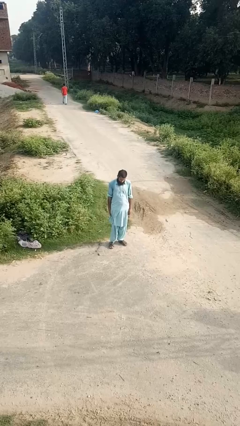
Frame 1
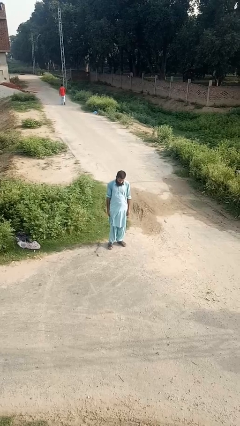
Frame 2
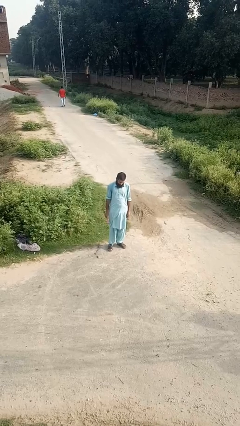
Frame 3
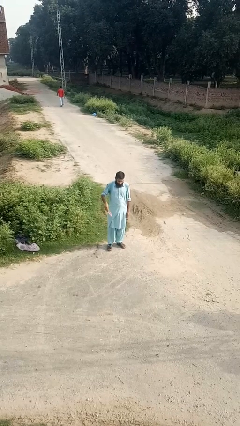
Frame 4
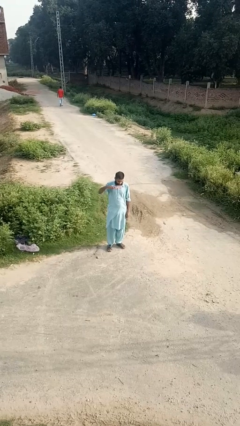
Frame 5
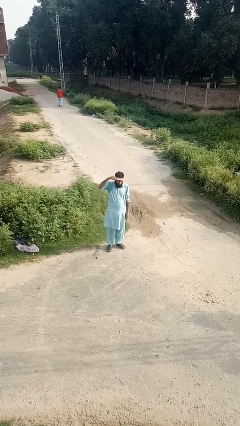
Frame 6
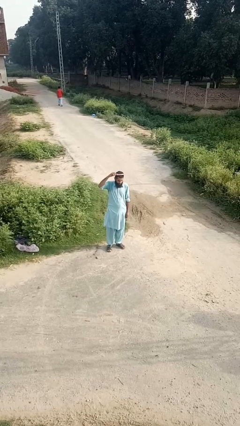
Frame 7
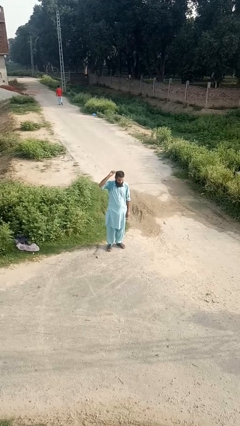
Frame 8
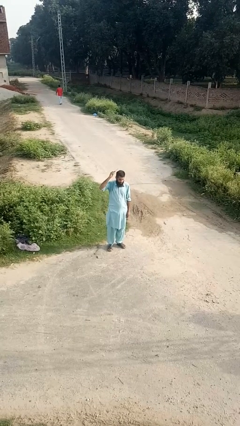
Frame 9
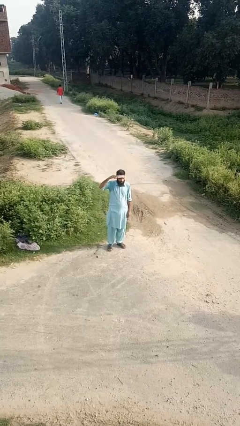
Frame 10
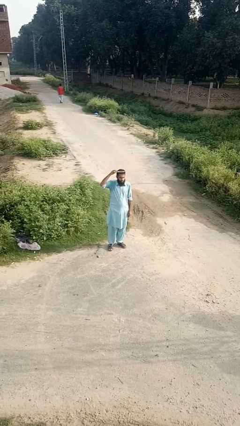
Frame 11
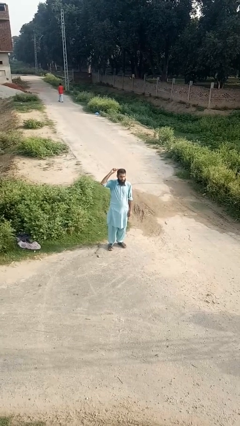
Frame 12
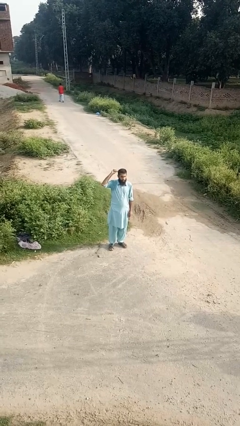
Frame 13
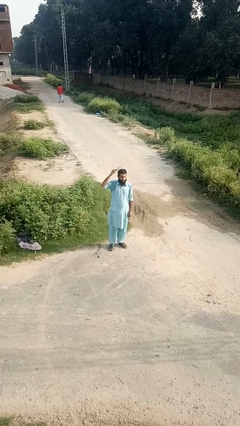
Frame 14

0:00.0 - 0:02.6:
person brushes hair

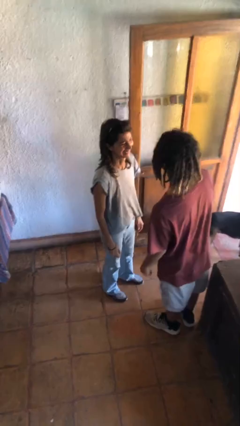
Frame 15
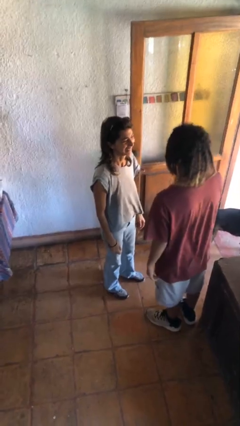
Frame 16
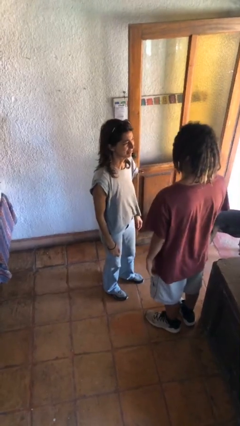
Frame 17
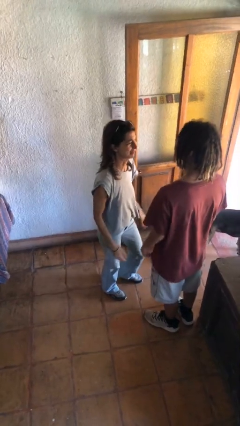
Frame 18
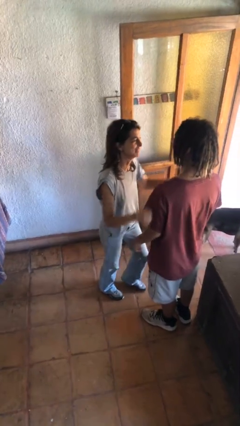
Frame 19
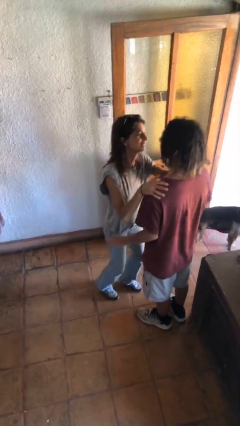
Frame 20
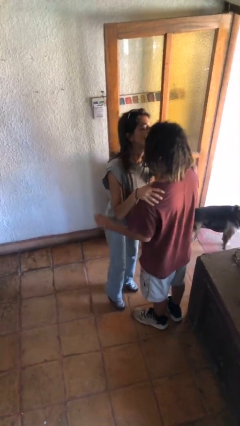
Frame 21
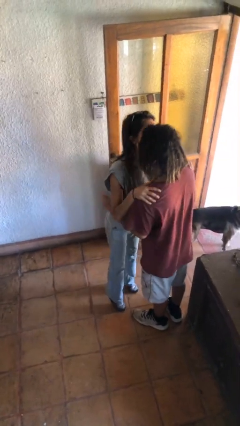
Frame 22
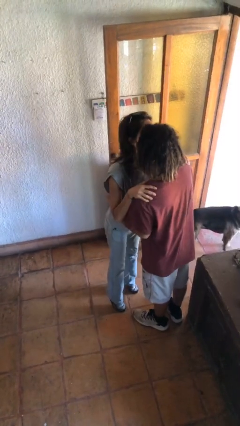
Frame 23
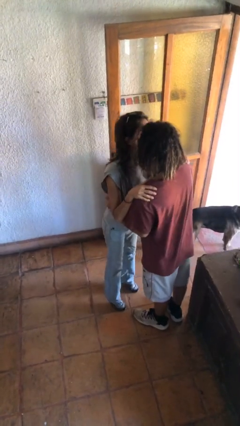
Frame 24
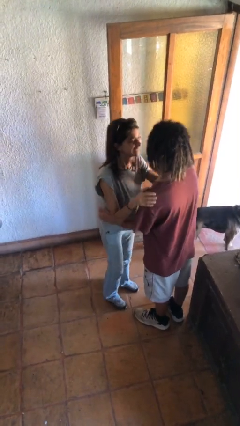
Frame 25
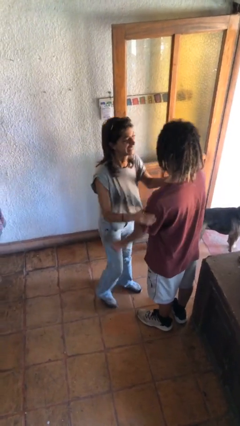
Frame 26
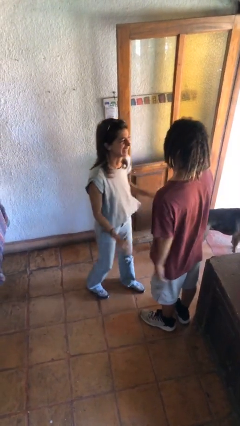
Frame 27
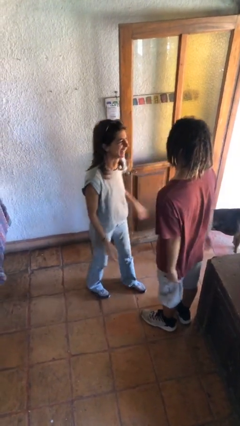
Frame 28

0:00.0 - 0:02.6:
person kisses cheek of person

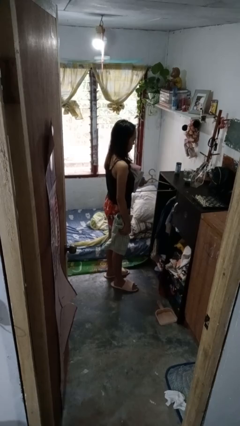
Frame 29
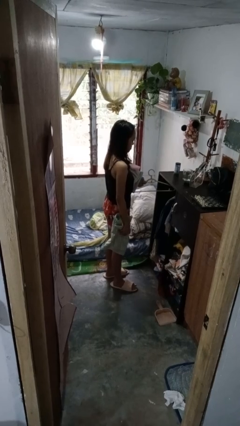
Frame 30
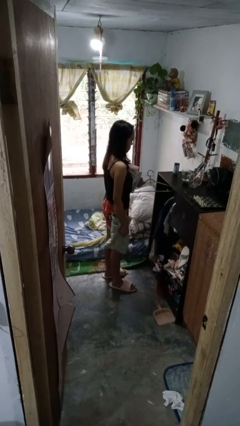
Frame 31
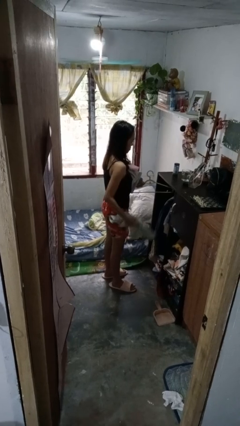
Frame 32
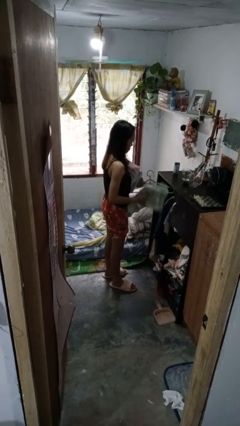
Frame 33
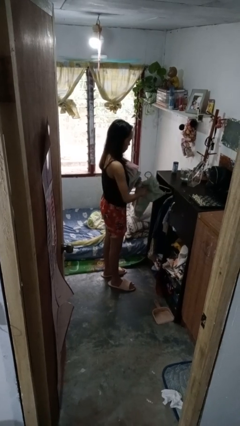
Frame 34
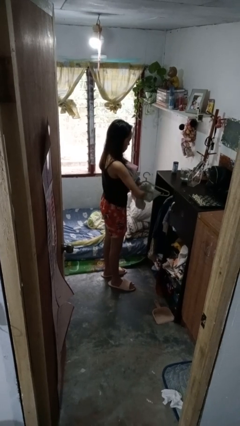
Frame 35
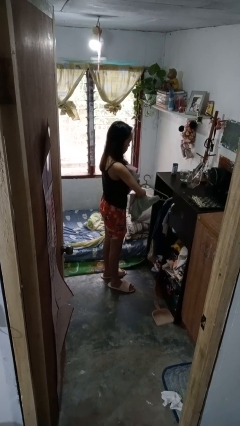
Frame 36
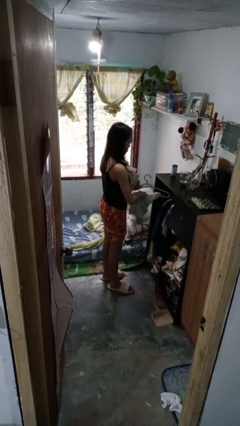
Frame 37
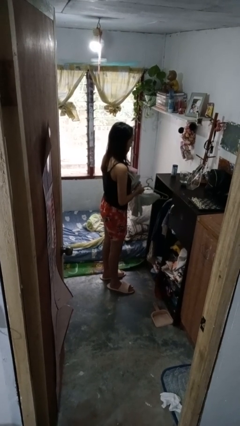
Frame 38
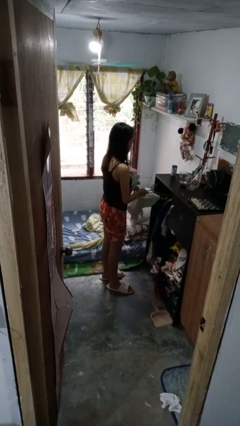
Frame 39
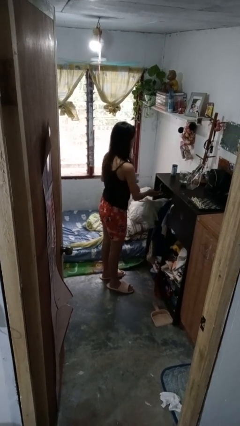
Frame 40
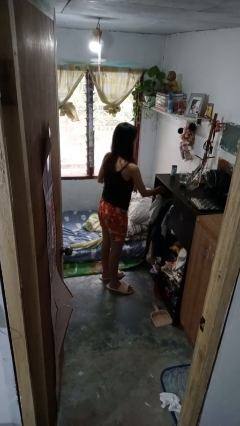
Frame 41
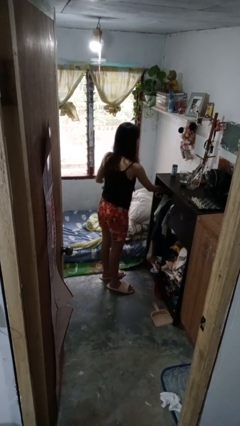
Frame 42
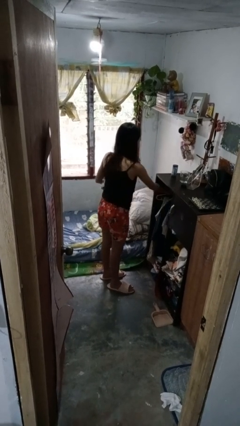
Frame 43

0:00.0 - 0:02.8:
person puts clothes into closet

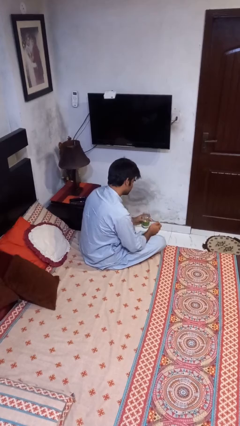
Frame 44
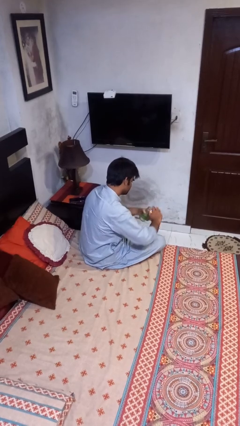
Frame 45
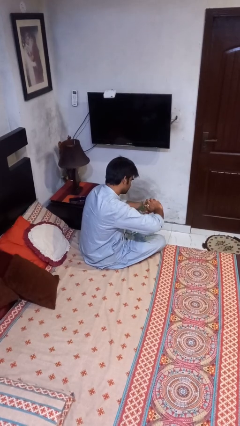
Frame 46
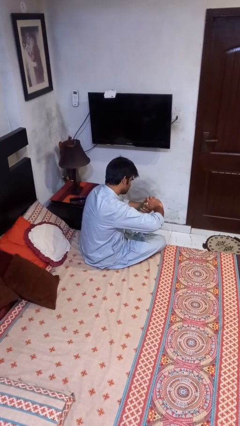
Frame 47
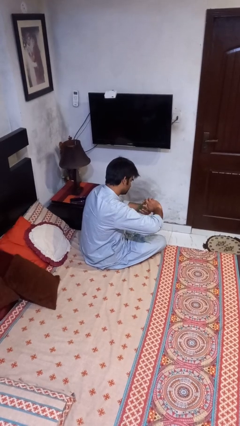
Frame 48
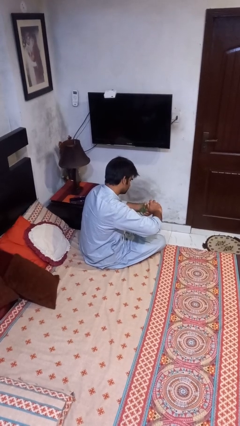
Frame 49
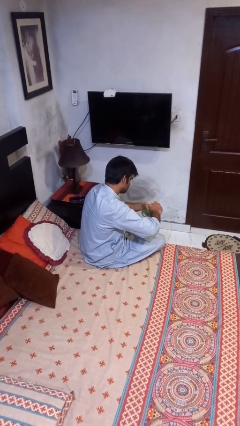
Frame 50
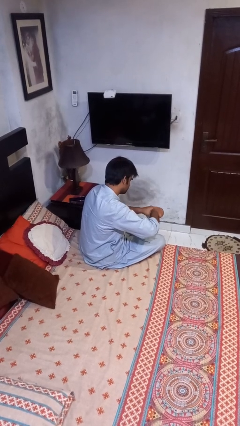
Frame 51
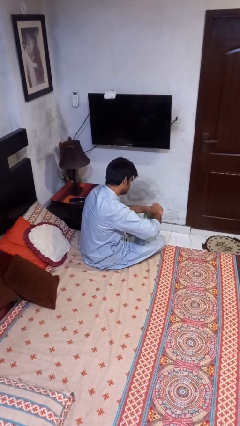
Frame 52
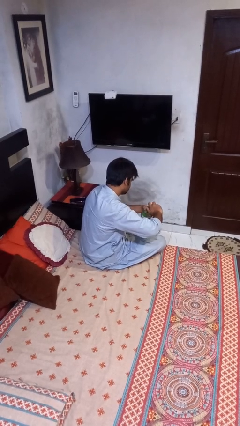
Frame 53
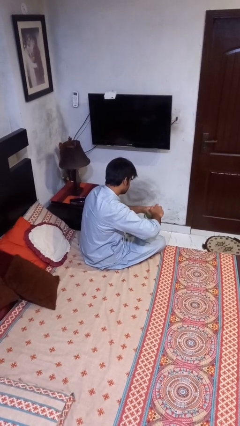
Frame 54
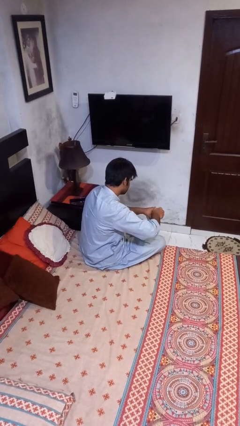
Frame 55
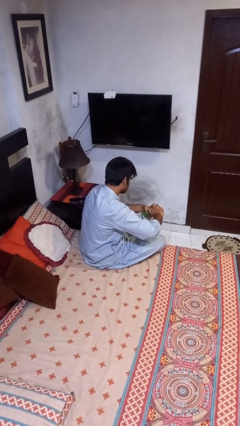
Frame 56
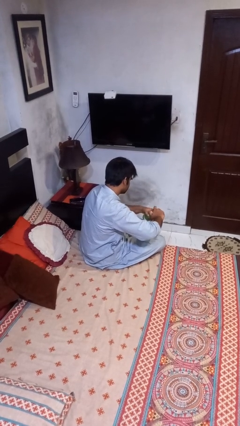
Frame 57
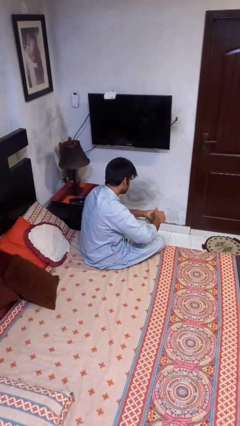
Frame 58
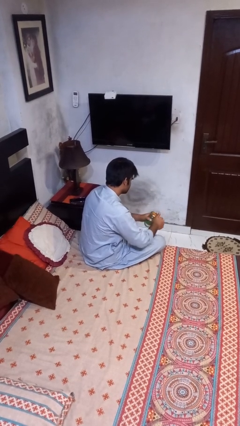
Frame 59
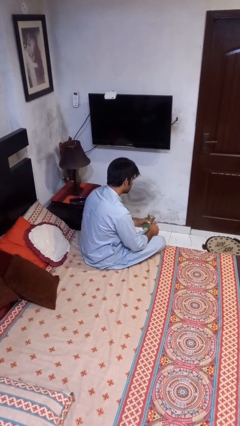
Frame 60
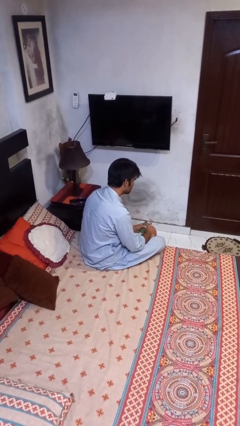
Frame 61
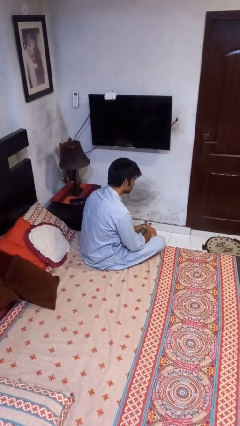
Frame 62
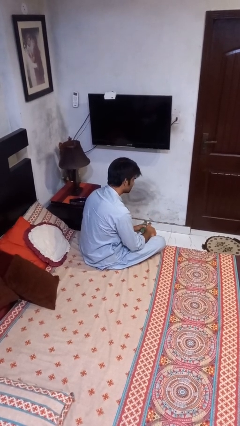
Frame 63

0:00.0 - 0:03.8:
person closes jar

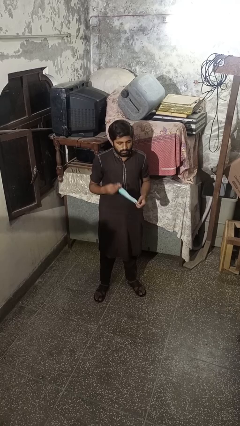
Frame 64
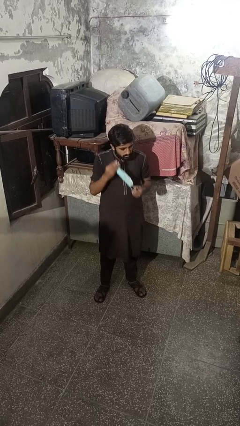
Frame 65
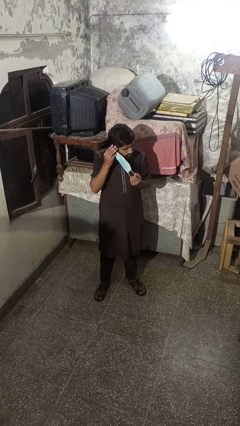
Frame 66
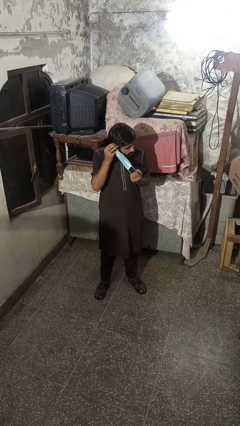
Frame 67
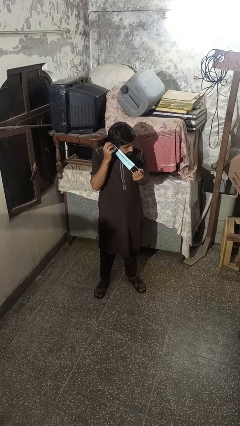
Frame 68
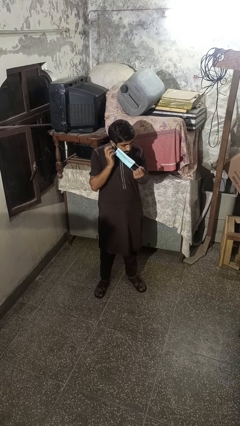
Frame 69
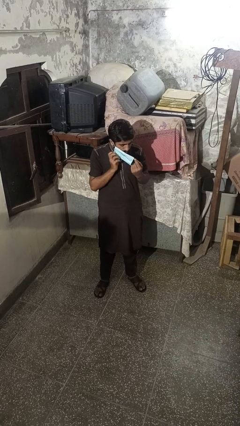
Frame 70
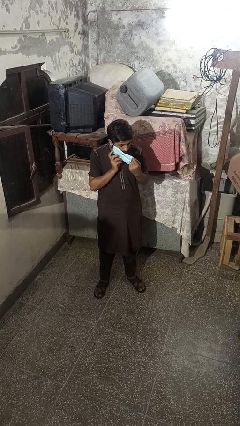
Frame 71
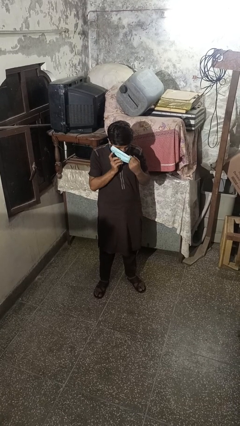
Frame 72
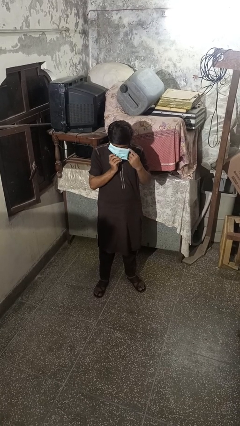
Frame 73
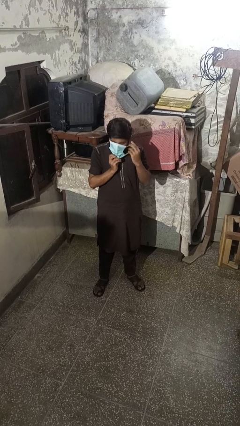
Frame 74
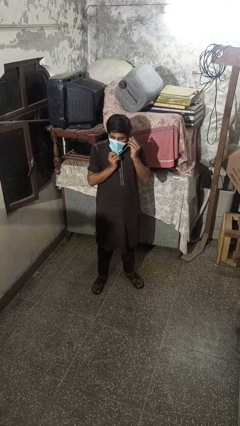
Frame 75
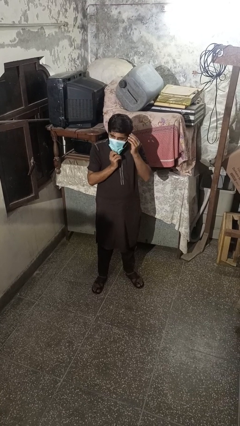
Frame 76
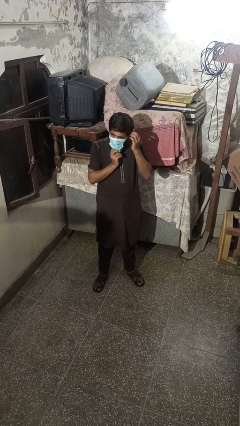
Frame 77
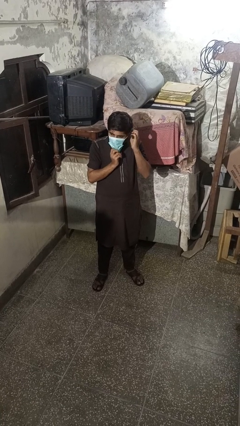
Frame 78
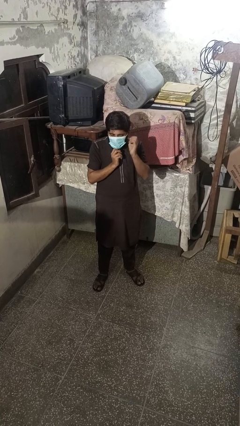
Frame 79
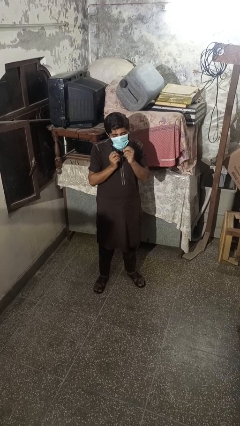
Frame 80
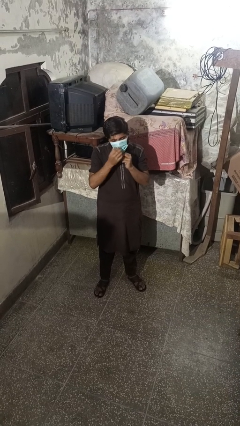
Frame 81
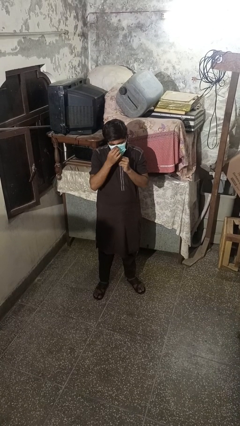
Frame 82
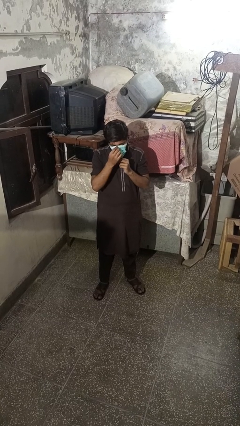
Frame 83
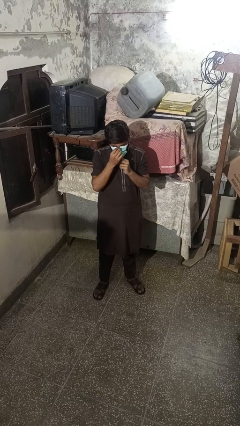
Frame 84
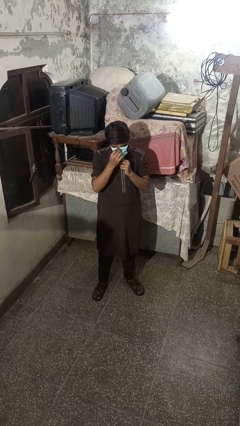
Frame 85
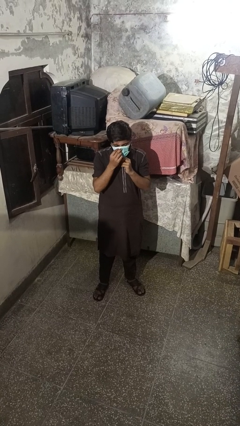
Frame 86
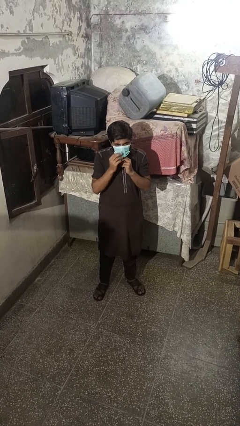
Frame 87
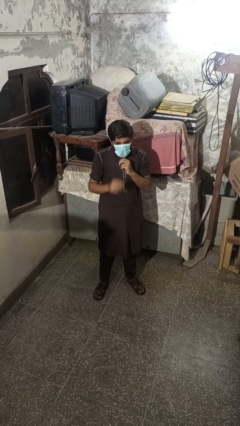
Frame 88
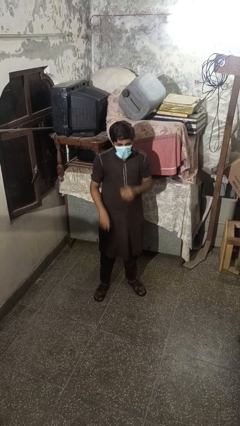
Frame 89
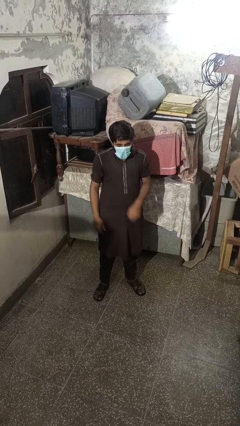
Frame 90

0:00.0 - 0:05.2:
person puts on facemask
